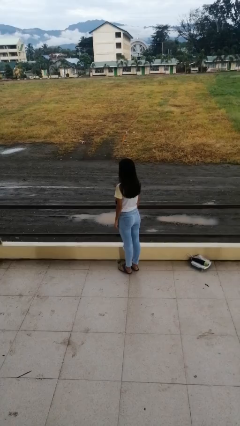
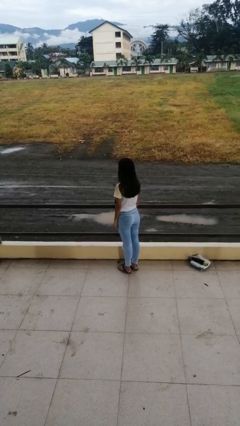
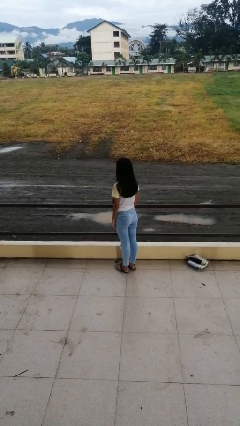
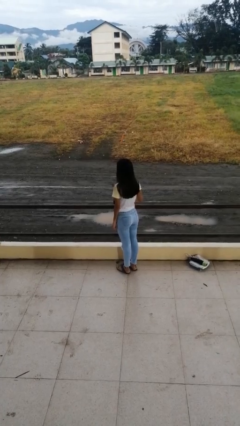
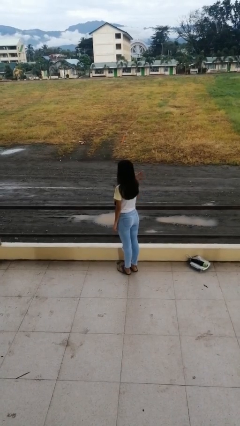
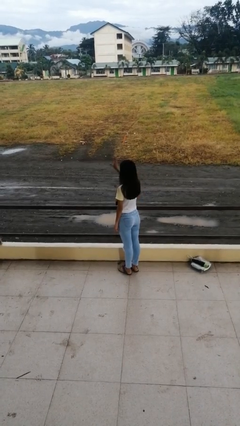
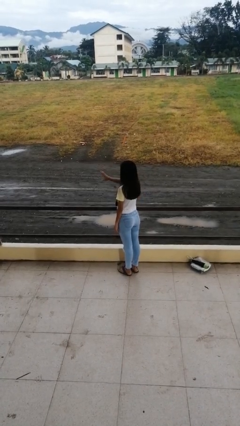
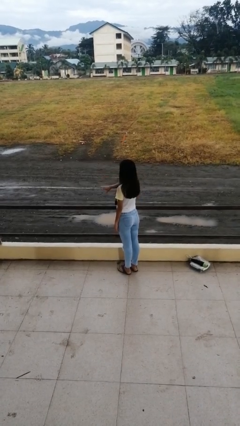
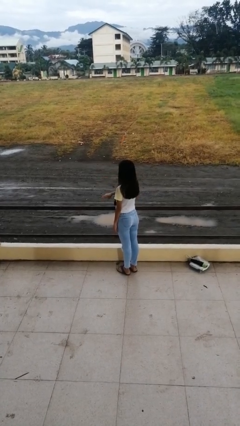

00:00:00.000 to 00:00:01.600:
person gestures swipe left

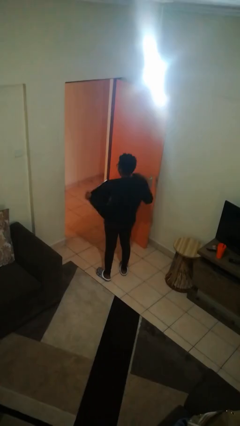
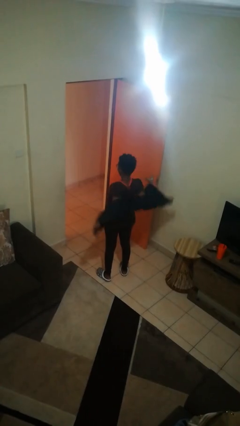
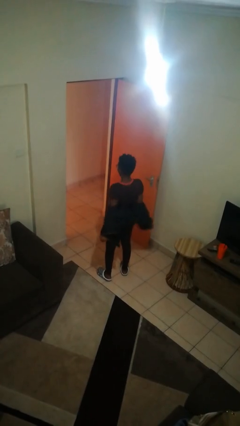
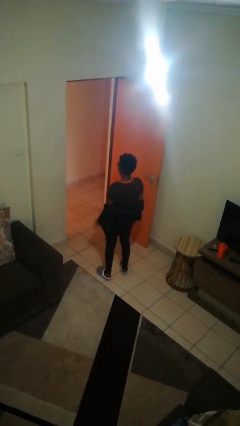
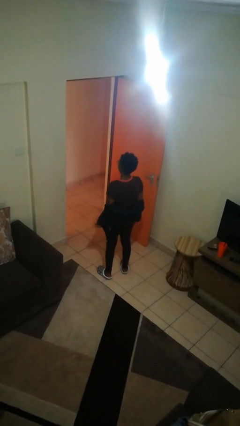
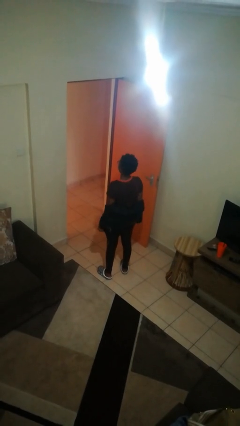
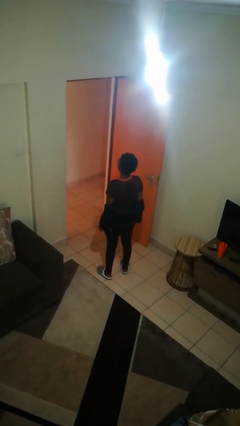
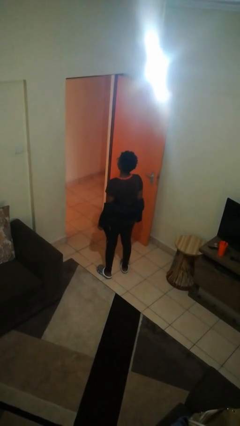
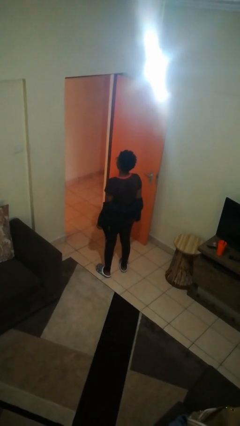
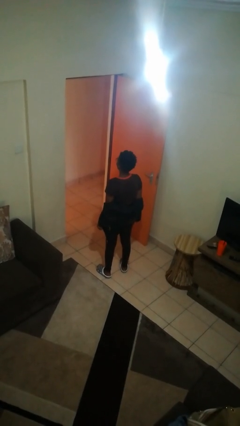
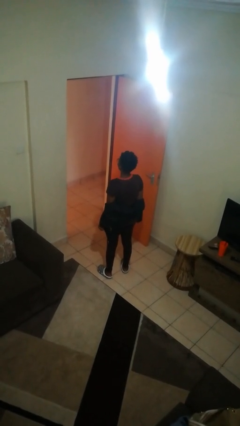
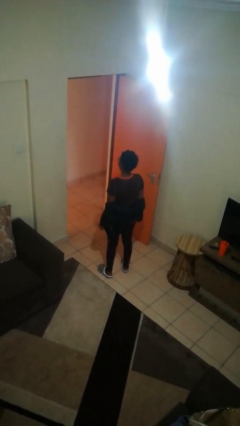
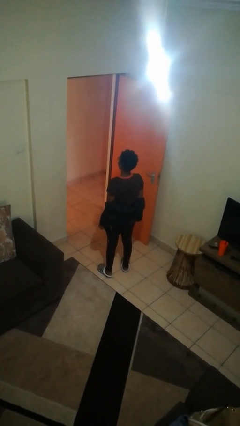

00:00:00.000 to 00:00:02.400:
person takes off jacket

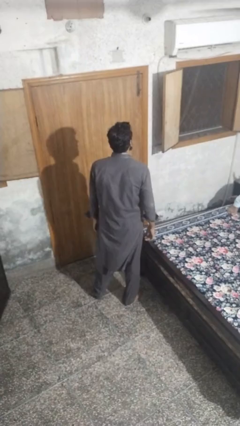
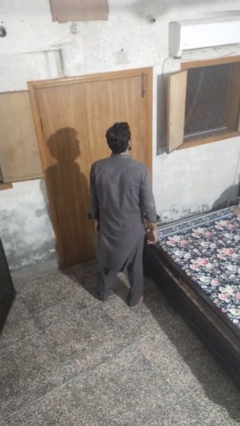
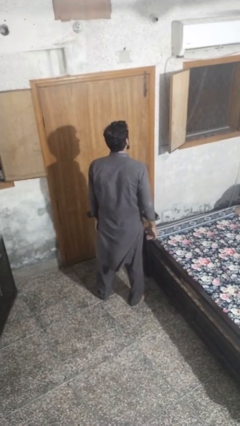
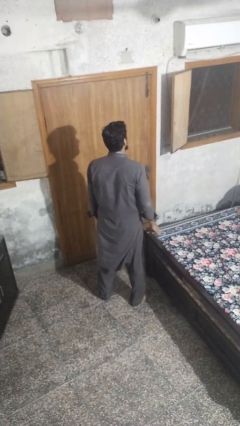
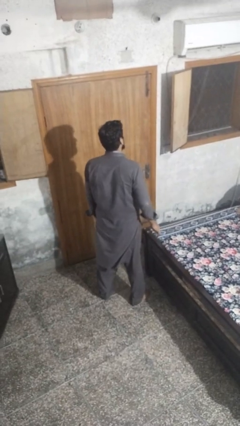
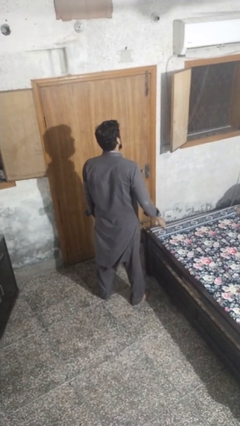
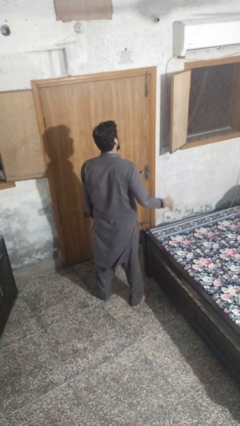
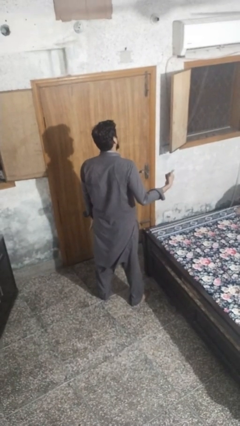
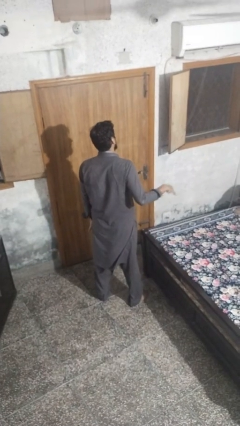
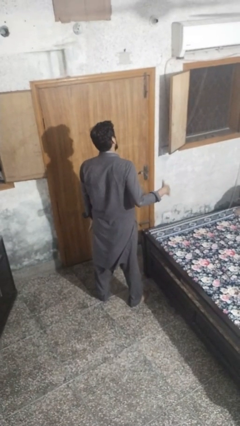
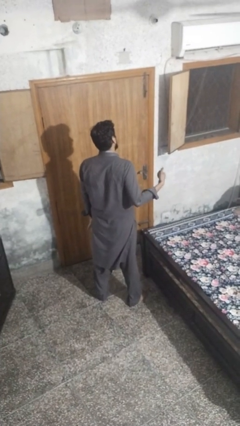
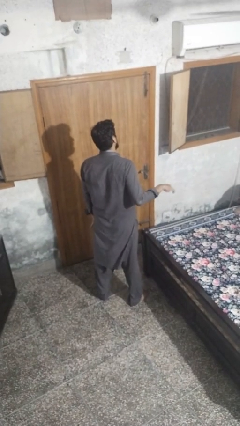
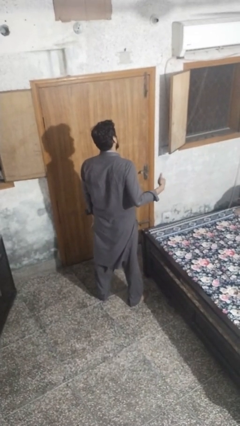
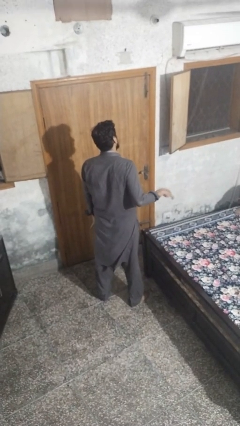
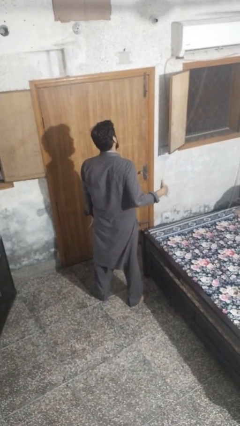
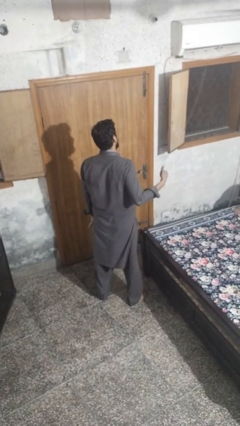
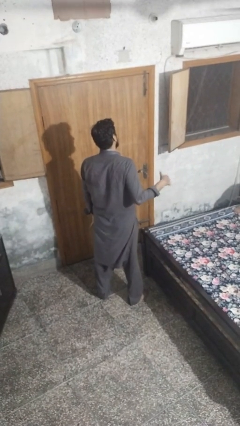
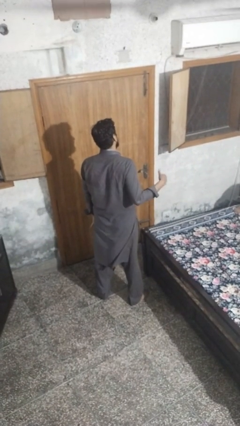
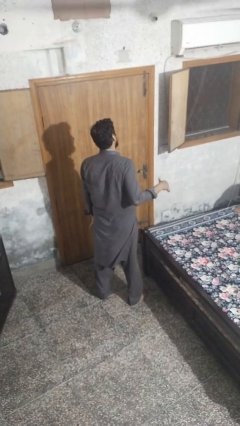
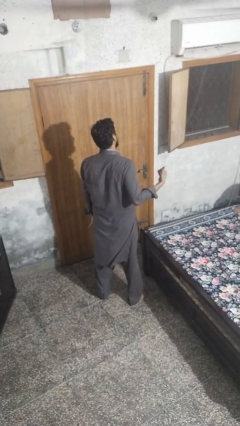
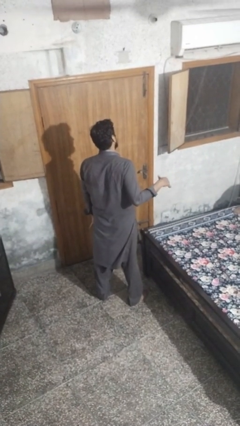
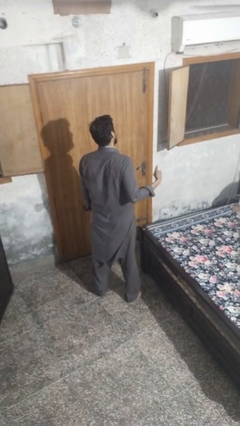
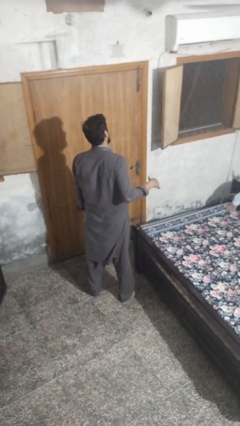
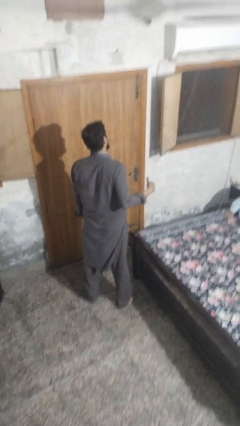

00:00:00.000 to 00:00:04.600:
person gestures hang loose

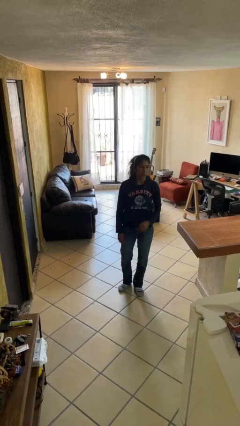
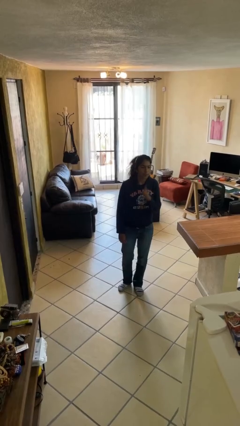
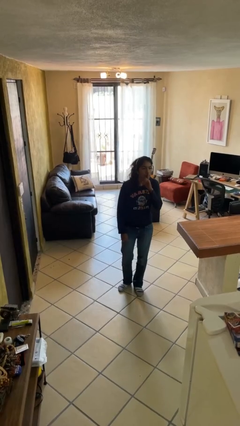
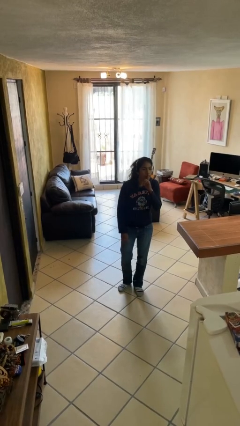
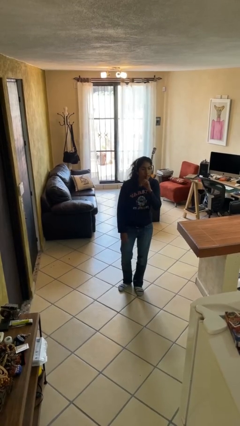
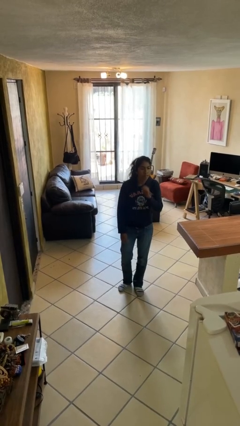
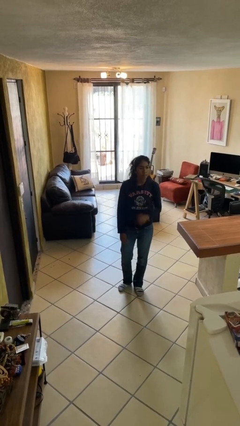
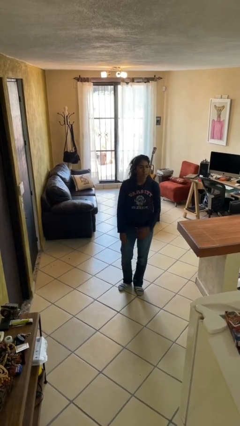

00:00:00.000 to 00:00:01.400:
person gestures be quiet

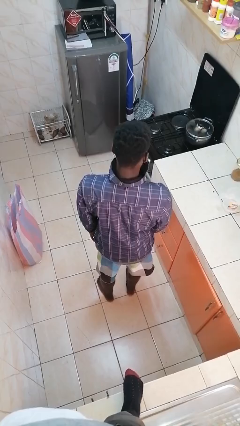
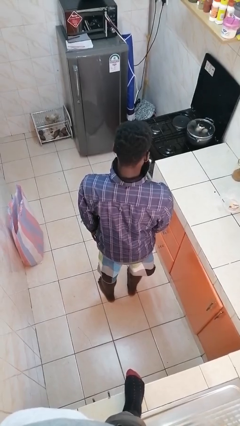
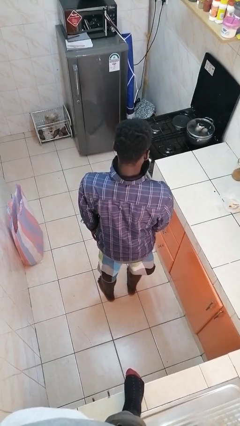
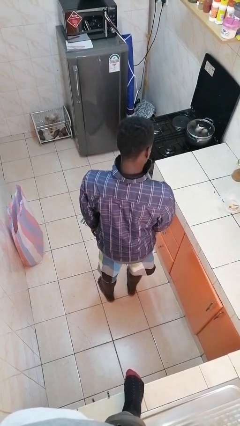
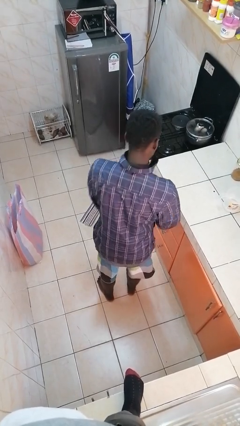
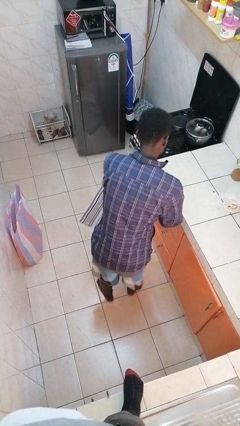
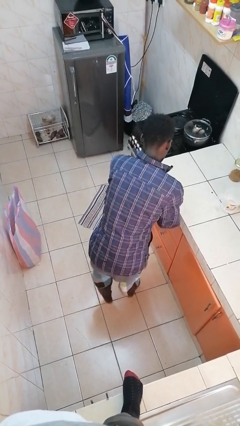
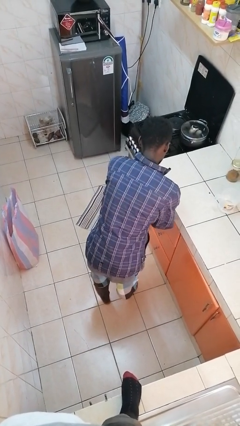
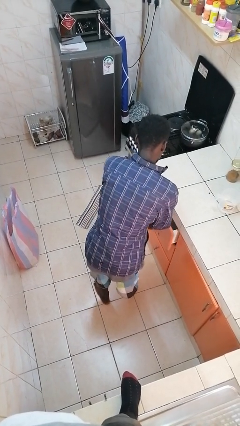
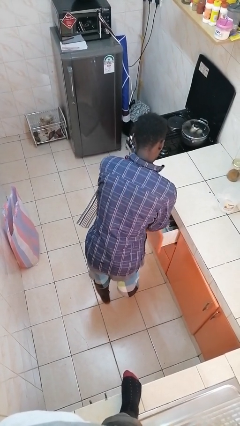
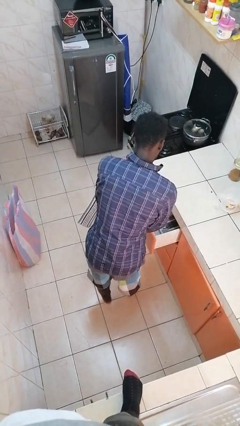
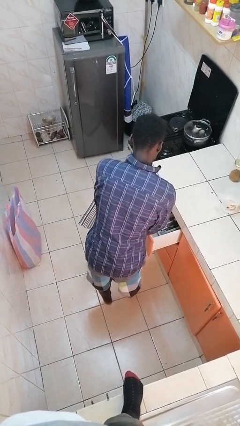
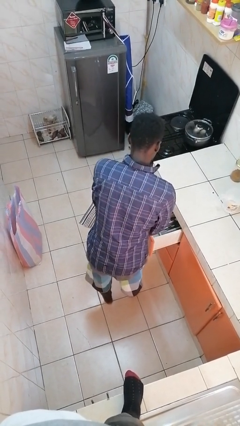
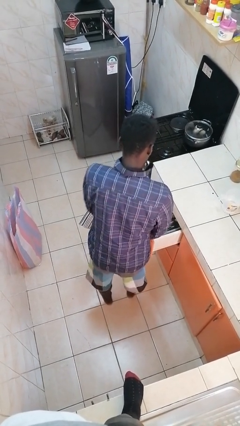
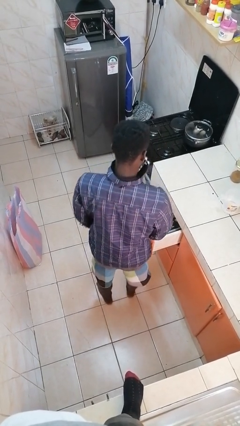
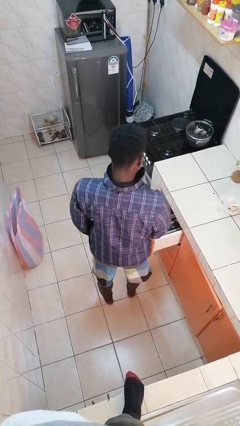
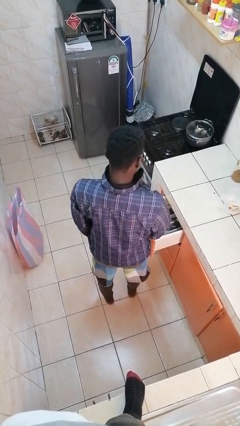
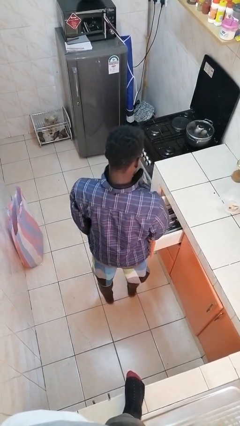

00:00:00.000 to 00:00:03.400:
person opens kitchen drawer

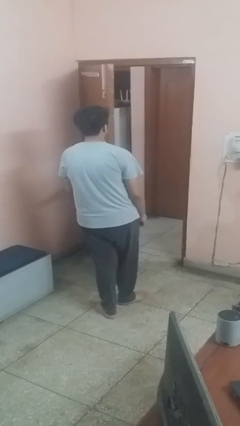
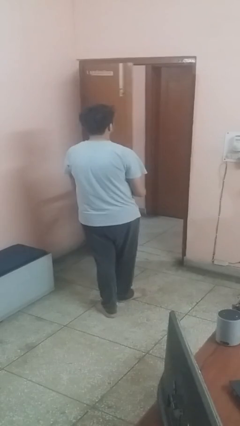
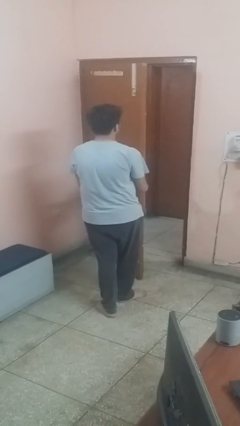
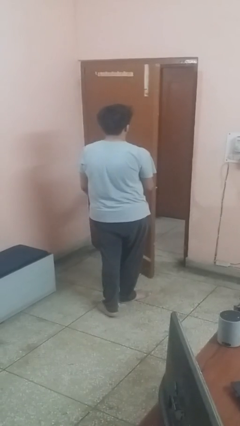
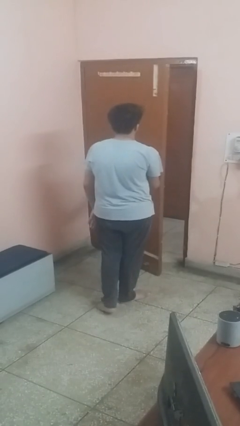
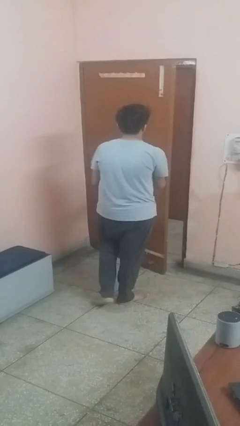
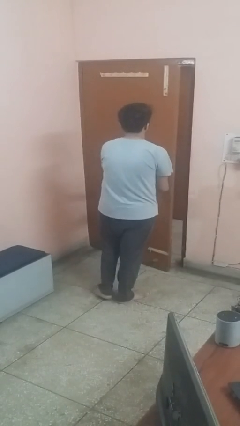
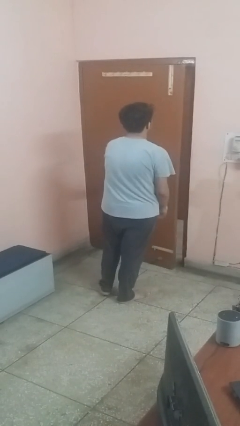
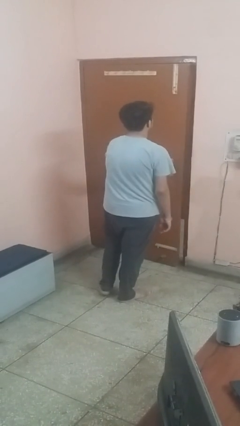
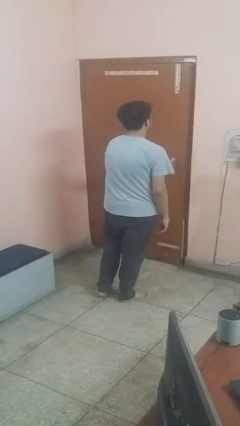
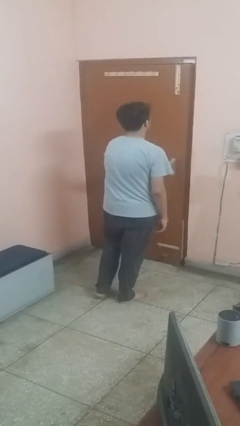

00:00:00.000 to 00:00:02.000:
person closes facility door

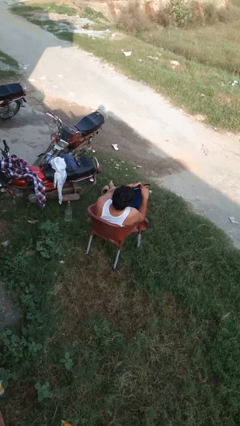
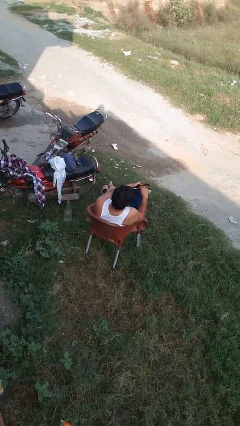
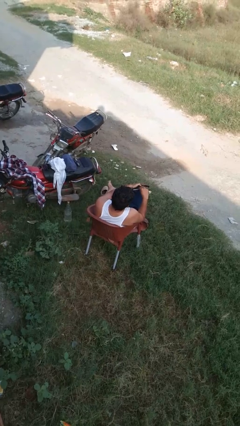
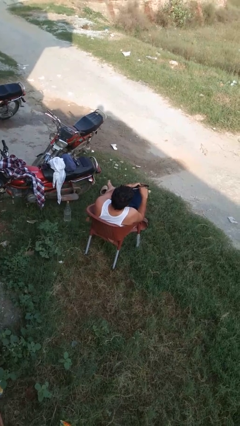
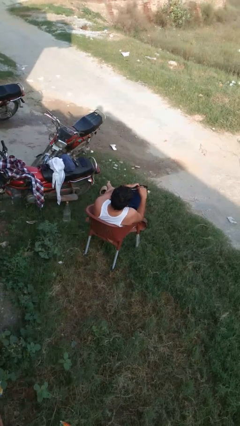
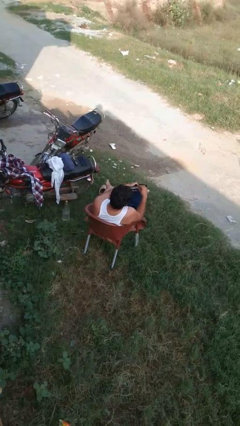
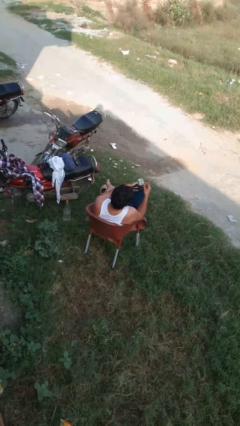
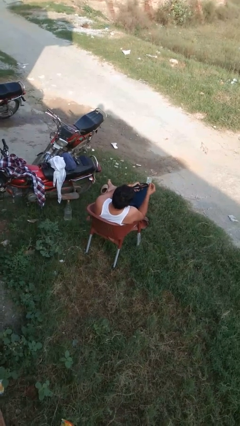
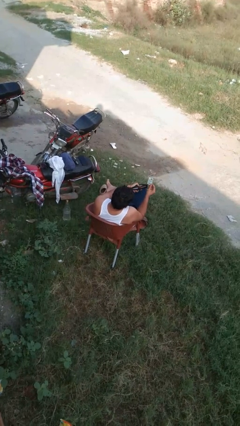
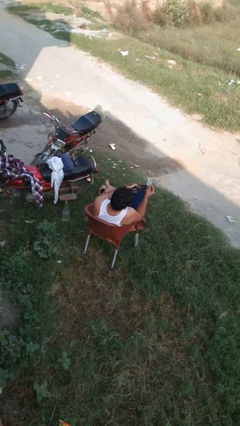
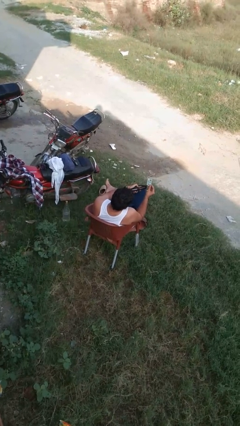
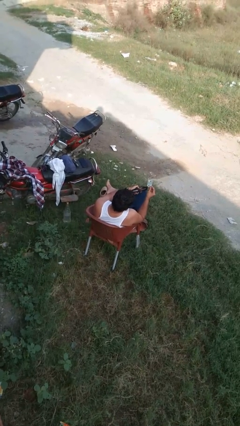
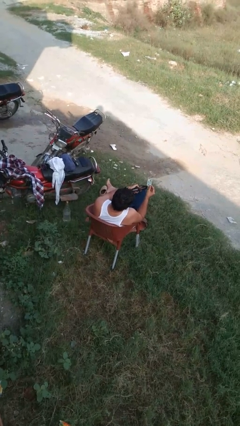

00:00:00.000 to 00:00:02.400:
person takes object from purse
